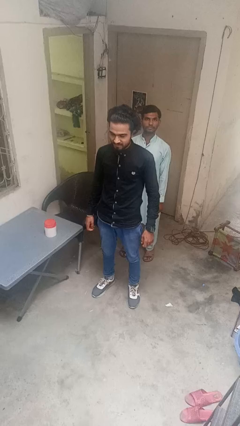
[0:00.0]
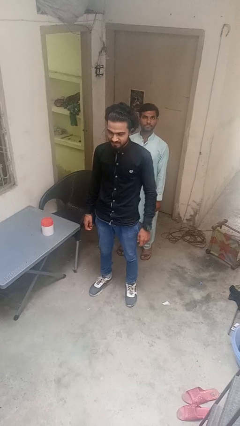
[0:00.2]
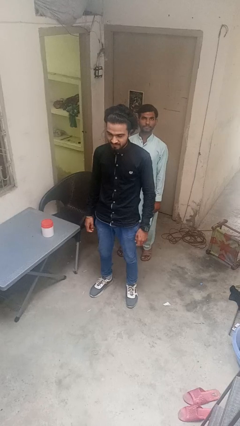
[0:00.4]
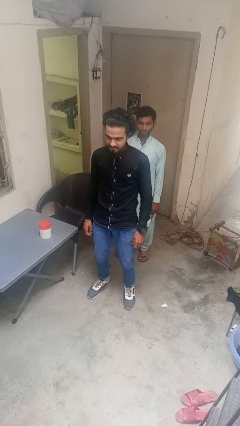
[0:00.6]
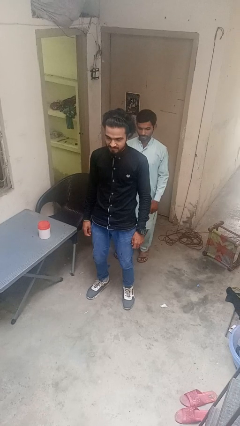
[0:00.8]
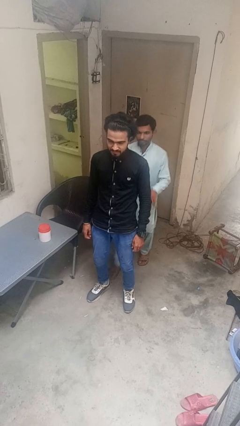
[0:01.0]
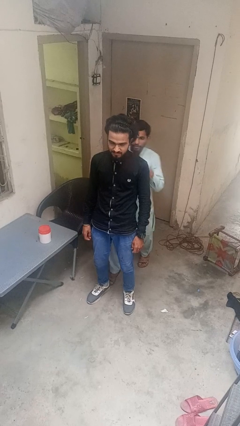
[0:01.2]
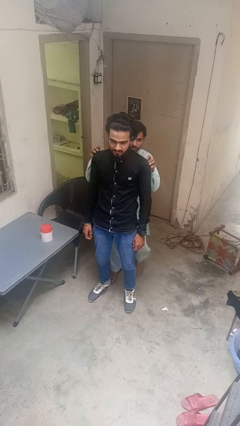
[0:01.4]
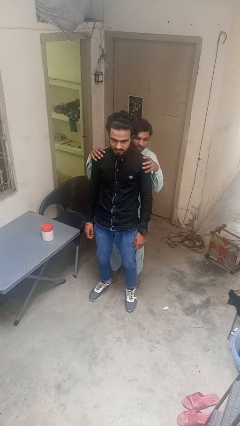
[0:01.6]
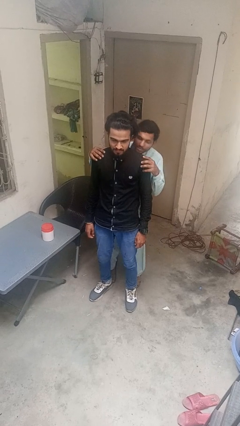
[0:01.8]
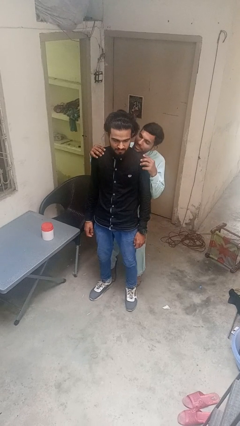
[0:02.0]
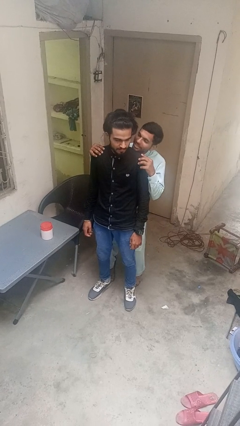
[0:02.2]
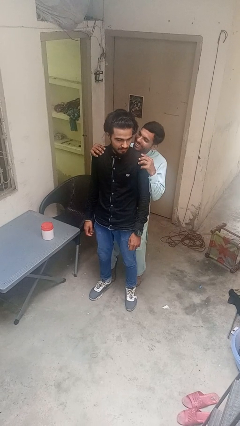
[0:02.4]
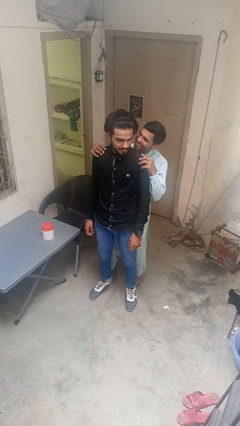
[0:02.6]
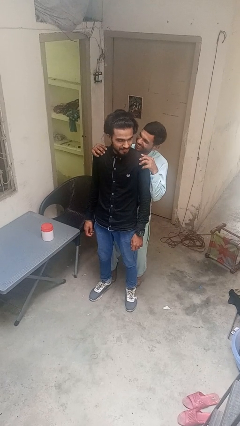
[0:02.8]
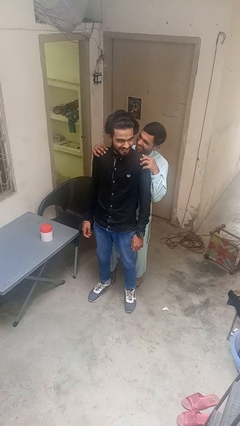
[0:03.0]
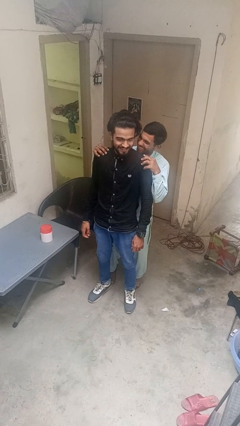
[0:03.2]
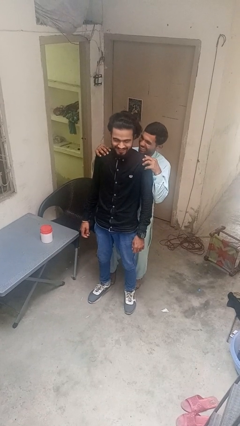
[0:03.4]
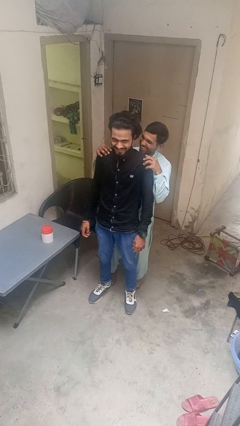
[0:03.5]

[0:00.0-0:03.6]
person looks over shoulder

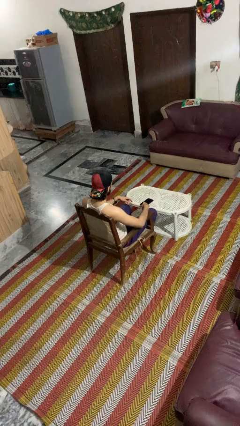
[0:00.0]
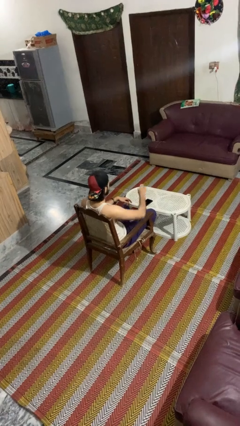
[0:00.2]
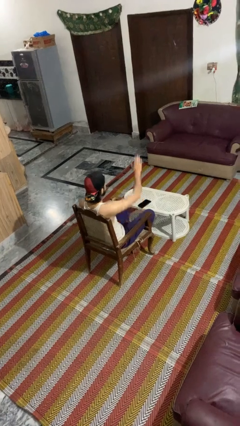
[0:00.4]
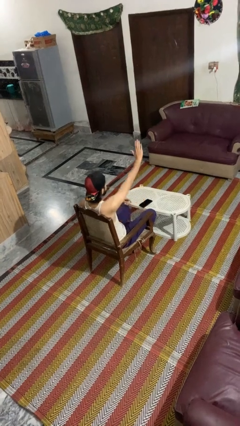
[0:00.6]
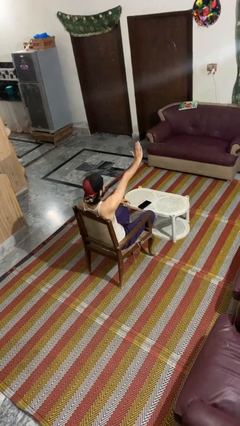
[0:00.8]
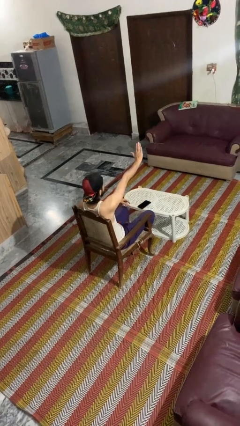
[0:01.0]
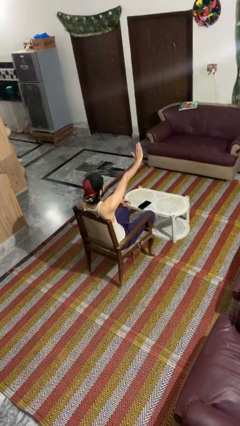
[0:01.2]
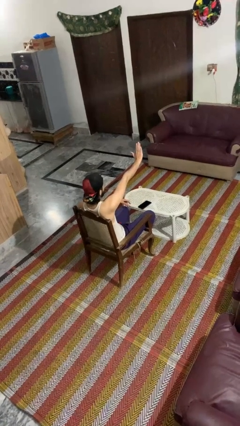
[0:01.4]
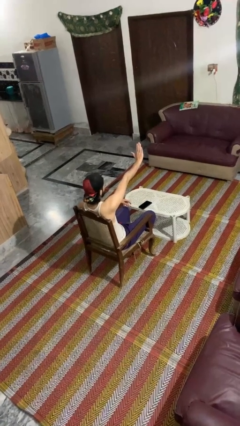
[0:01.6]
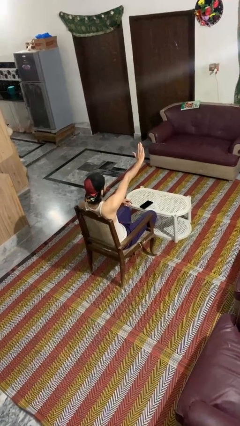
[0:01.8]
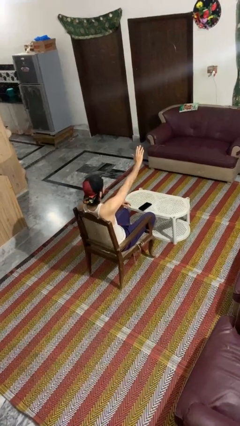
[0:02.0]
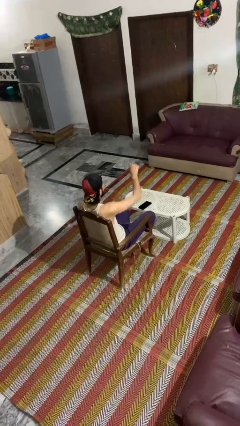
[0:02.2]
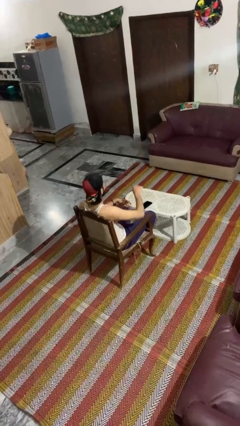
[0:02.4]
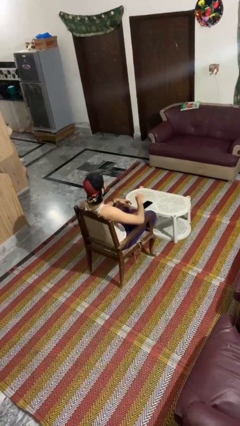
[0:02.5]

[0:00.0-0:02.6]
person gestures stop

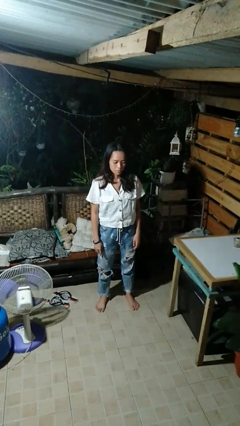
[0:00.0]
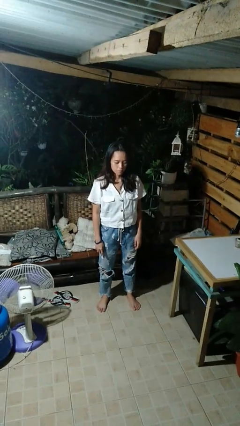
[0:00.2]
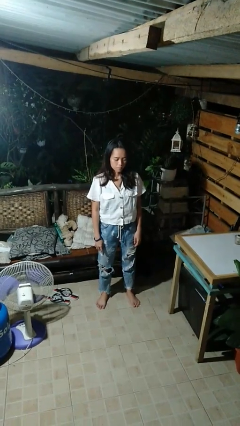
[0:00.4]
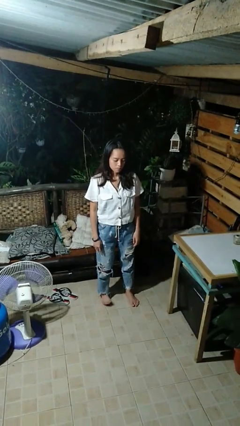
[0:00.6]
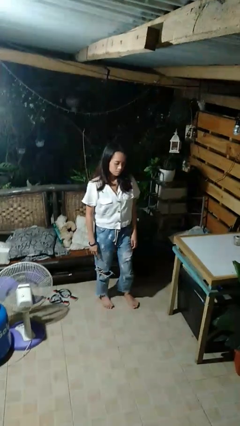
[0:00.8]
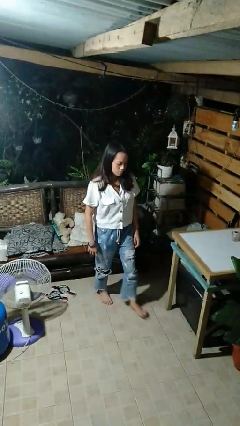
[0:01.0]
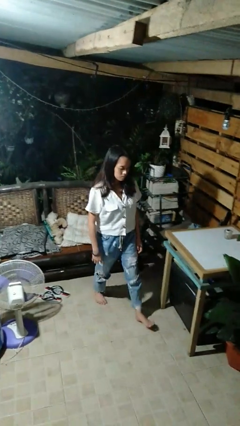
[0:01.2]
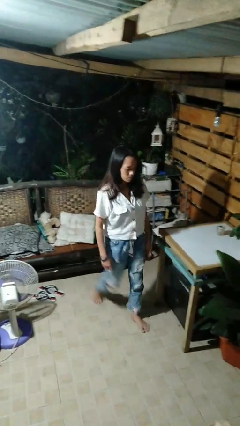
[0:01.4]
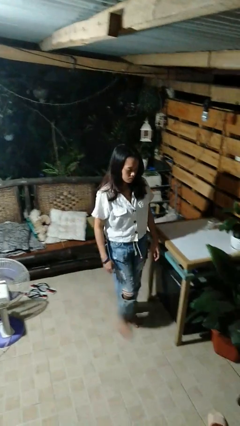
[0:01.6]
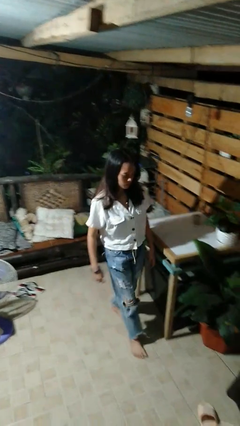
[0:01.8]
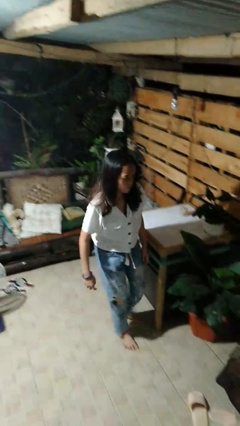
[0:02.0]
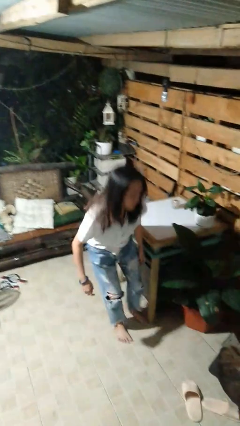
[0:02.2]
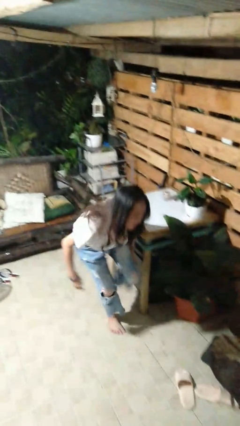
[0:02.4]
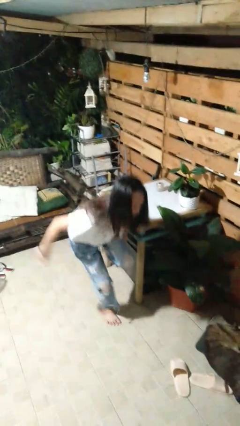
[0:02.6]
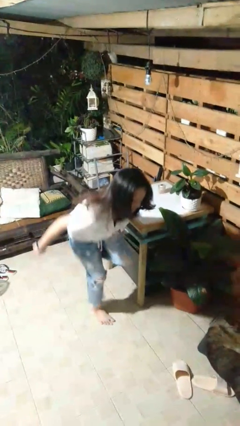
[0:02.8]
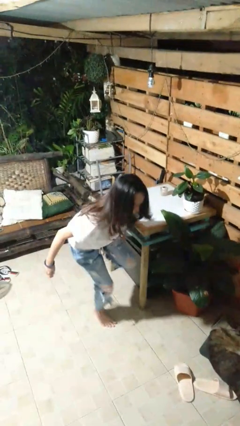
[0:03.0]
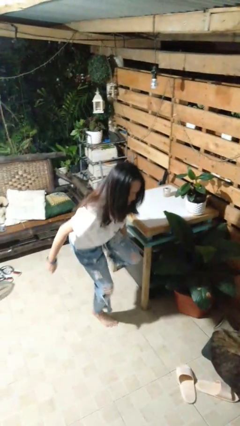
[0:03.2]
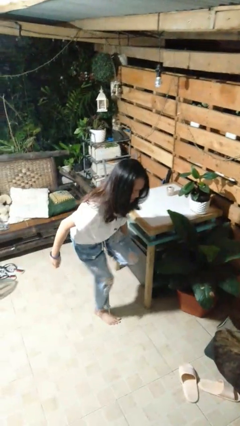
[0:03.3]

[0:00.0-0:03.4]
person stubs toe

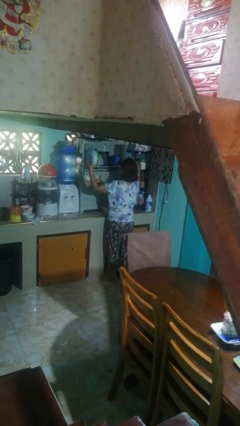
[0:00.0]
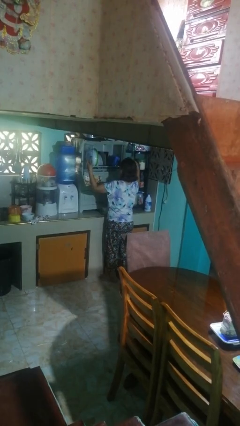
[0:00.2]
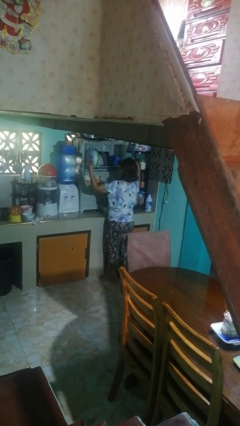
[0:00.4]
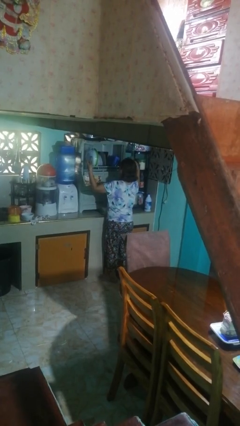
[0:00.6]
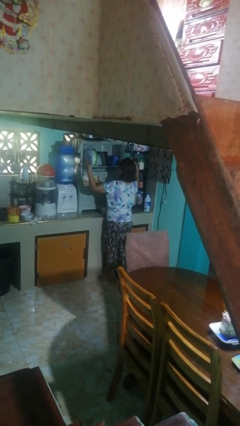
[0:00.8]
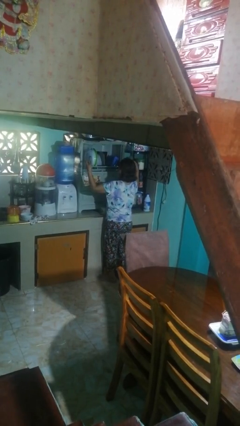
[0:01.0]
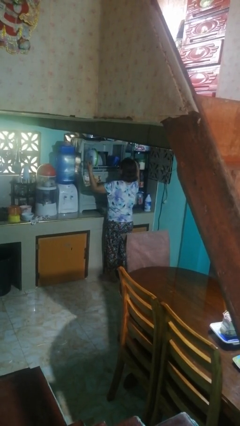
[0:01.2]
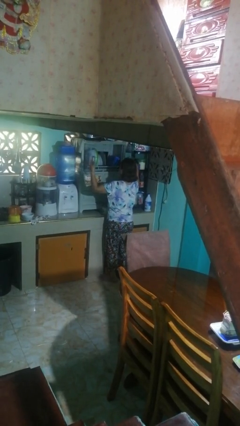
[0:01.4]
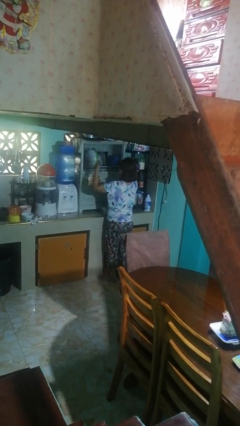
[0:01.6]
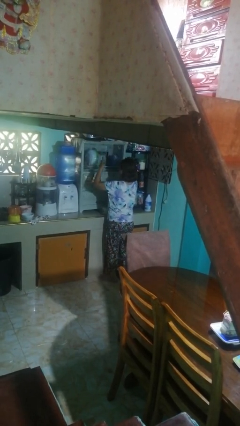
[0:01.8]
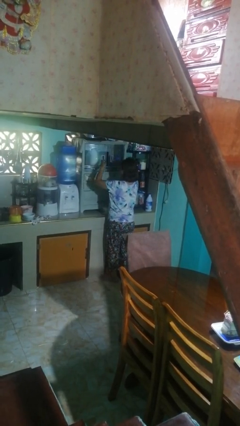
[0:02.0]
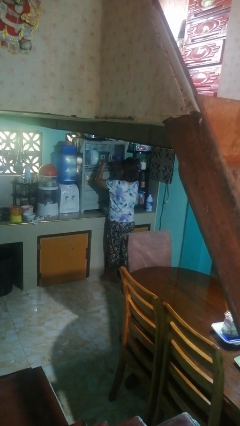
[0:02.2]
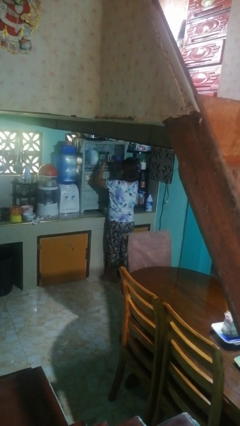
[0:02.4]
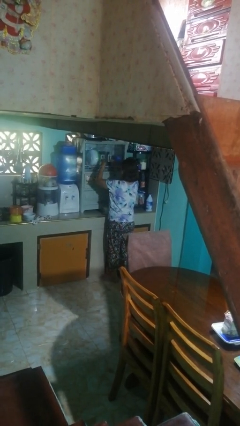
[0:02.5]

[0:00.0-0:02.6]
person opens curtains

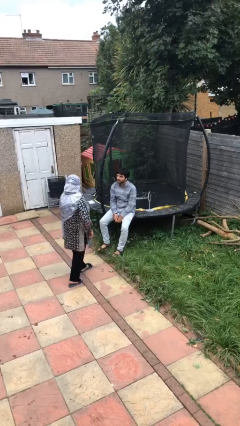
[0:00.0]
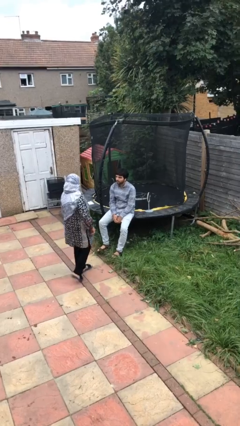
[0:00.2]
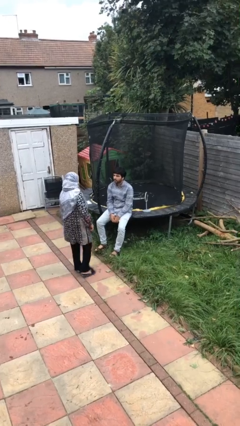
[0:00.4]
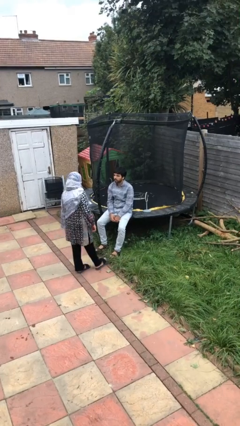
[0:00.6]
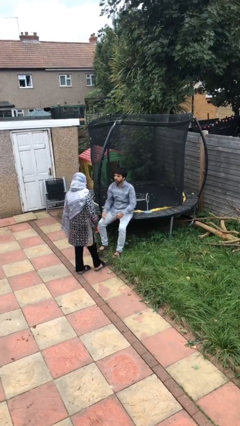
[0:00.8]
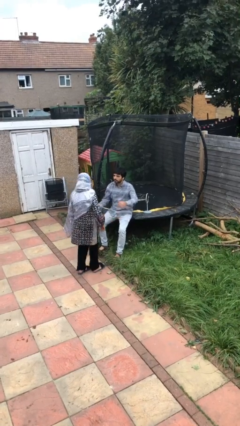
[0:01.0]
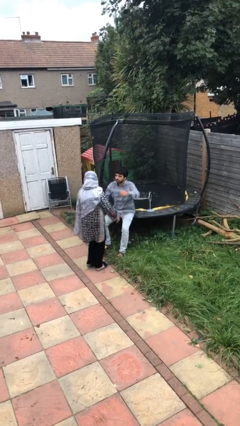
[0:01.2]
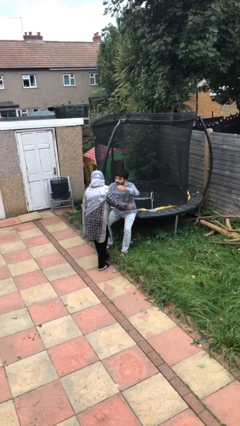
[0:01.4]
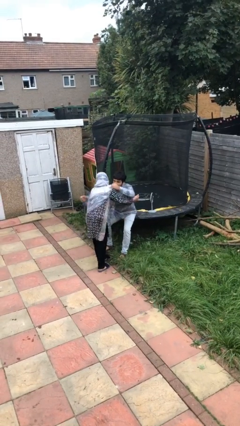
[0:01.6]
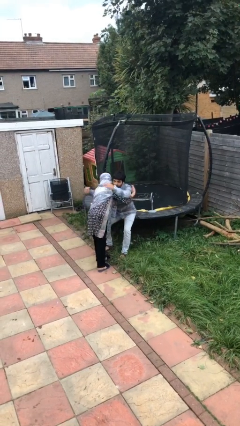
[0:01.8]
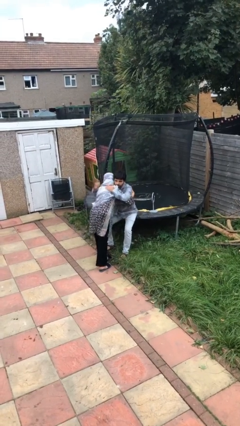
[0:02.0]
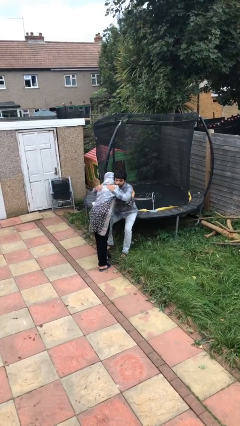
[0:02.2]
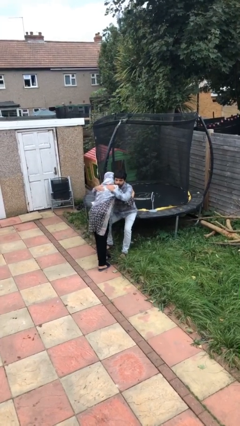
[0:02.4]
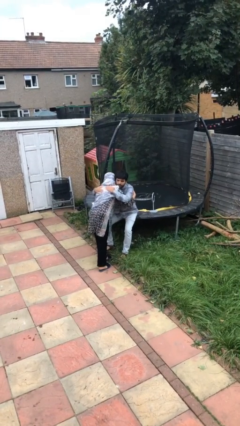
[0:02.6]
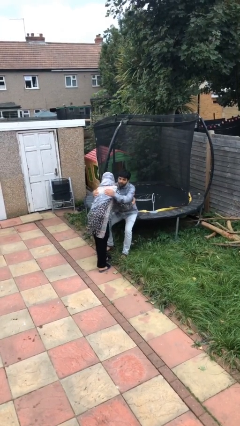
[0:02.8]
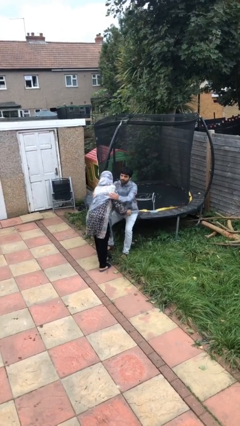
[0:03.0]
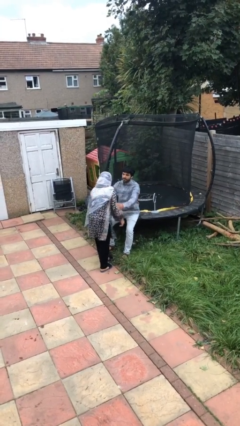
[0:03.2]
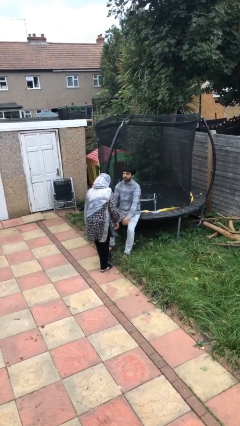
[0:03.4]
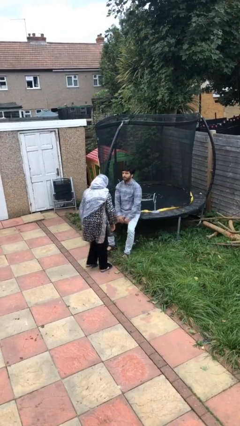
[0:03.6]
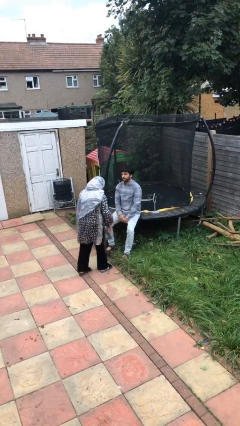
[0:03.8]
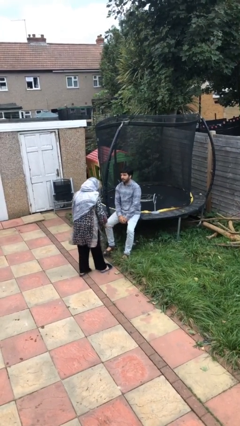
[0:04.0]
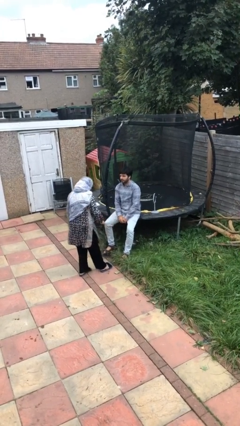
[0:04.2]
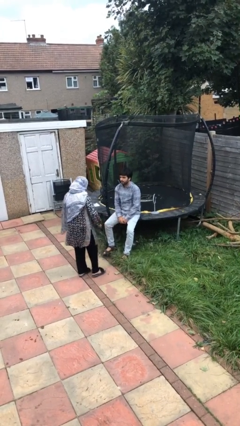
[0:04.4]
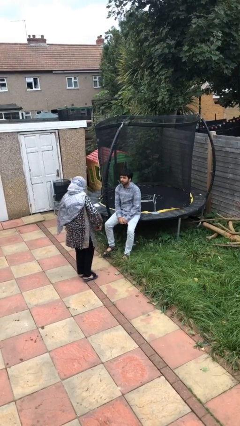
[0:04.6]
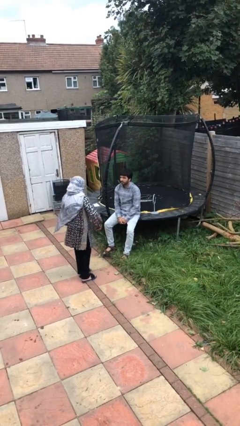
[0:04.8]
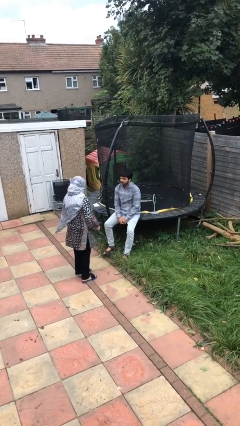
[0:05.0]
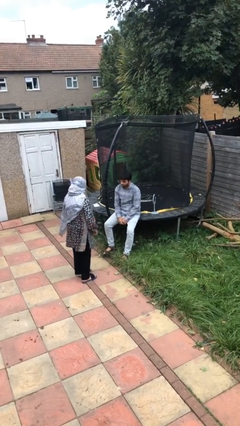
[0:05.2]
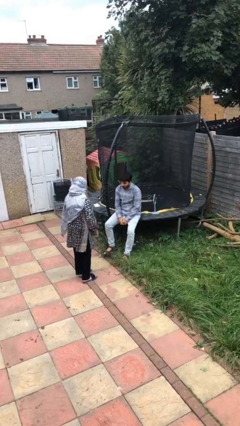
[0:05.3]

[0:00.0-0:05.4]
person embraces person

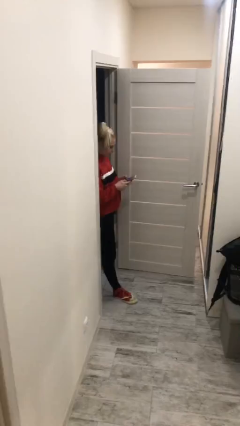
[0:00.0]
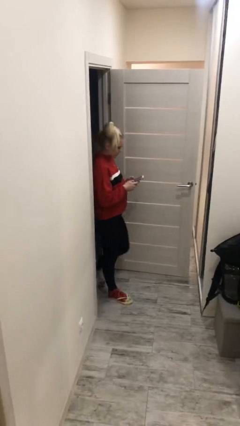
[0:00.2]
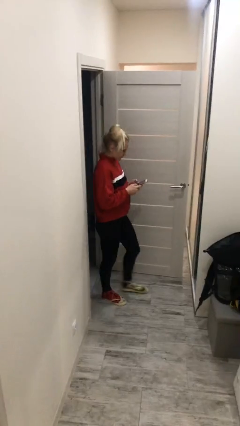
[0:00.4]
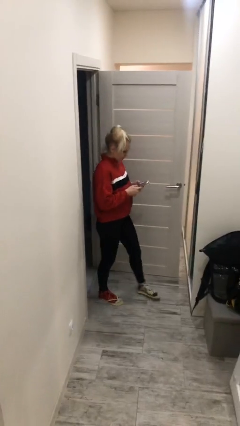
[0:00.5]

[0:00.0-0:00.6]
person enters scene through structure
